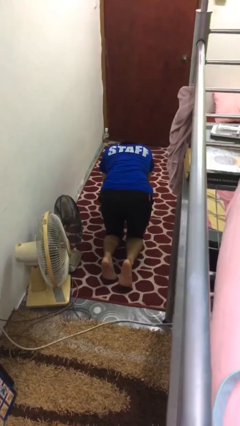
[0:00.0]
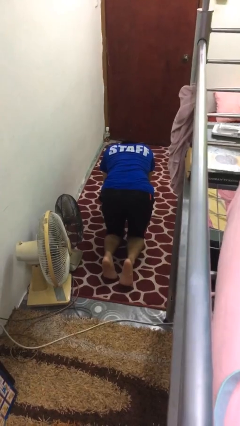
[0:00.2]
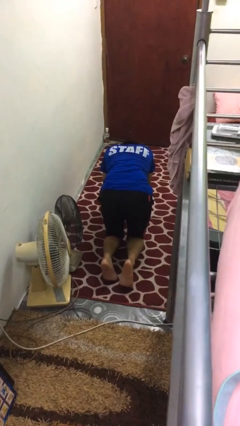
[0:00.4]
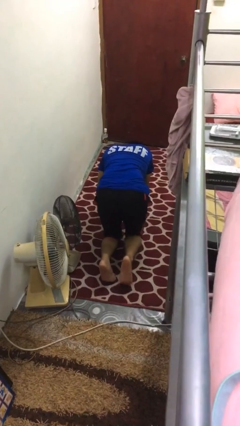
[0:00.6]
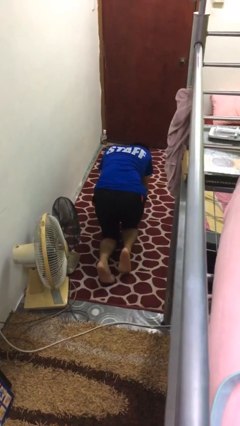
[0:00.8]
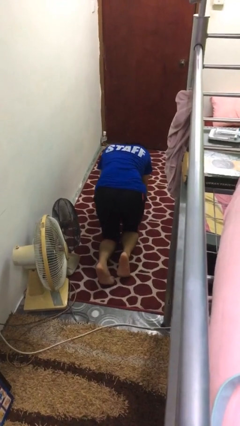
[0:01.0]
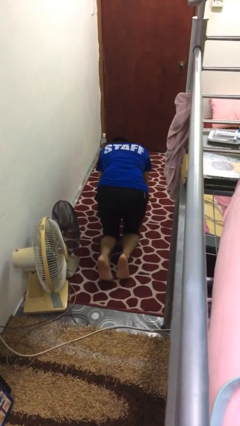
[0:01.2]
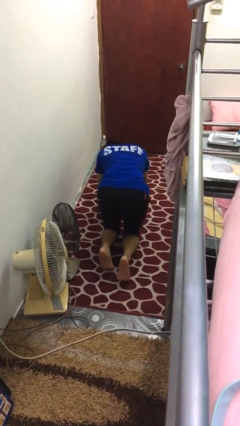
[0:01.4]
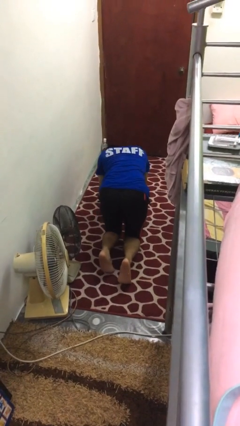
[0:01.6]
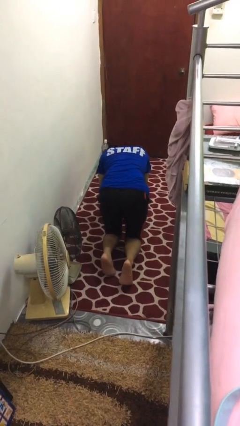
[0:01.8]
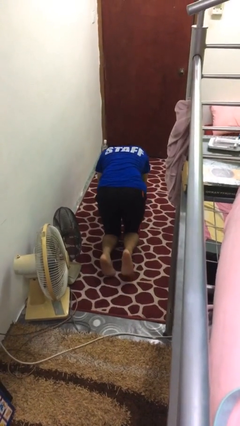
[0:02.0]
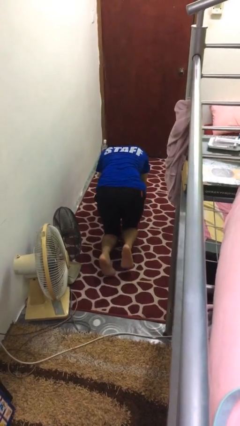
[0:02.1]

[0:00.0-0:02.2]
person crawls

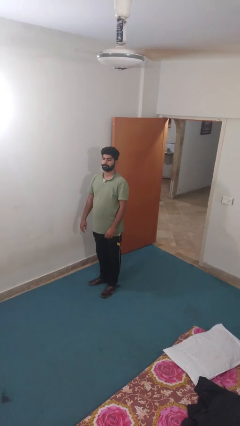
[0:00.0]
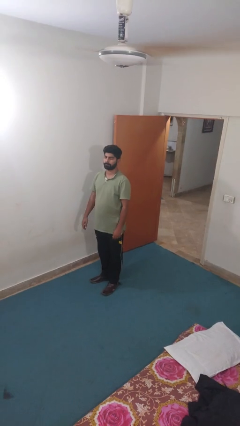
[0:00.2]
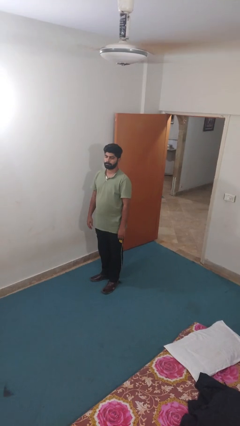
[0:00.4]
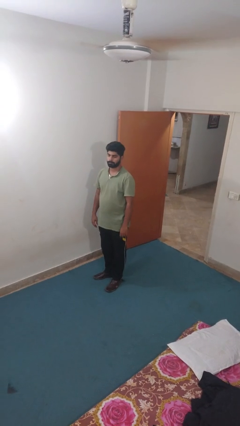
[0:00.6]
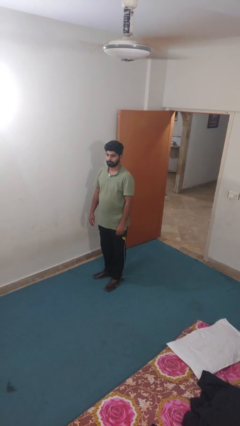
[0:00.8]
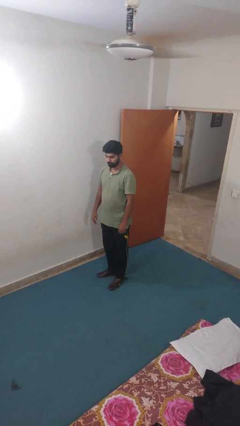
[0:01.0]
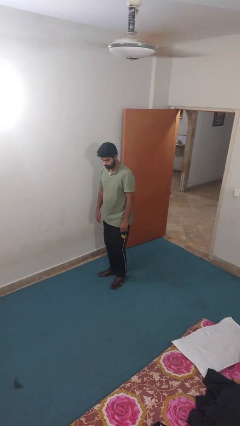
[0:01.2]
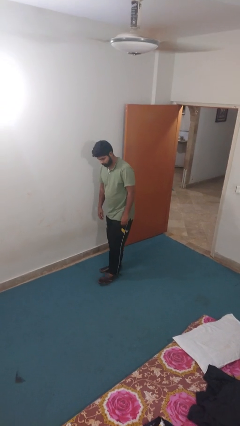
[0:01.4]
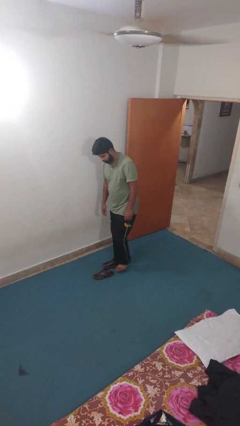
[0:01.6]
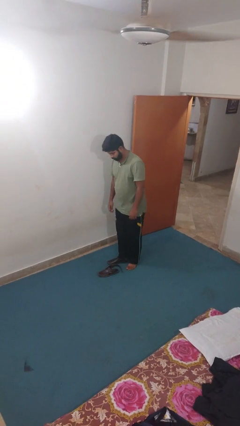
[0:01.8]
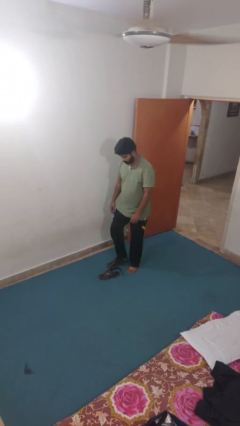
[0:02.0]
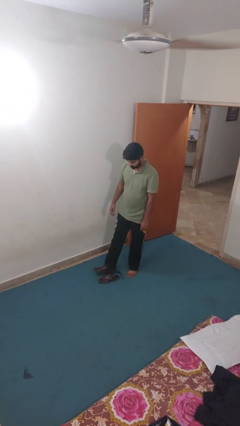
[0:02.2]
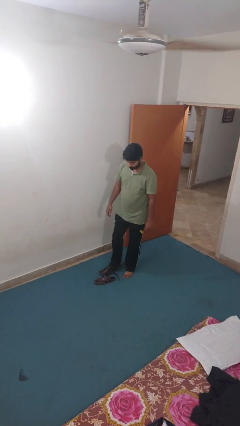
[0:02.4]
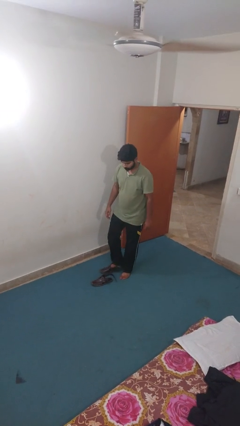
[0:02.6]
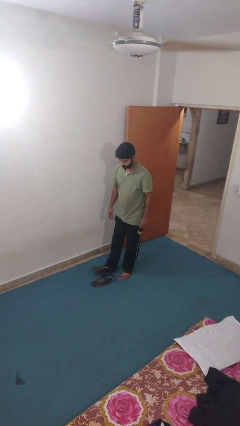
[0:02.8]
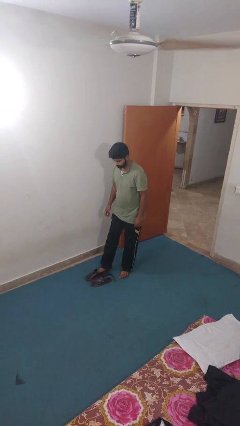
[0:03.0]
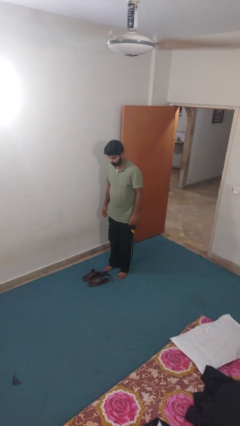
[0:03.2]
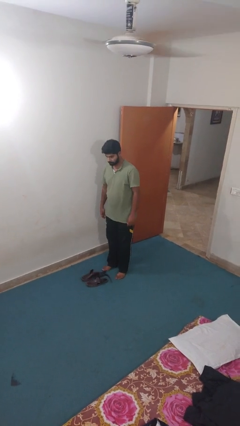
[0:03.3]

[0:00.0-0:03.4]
person takes off shoes

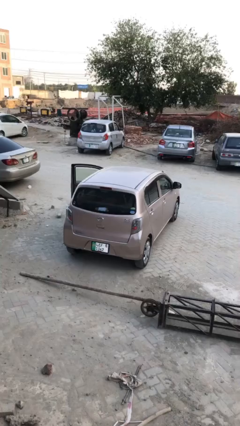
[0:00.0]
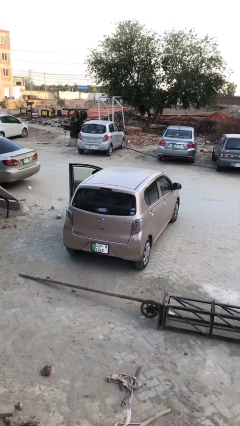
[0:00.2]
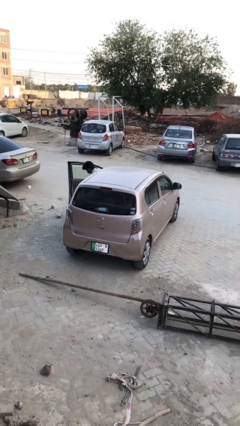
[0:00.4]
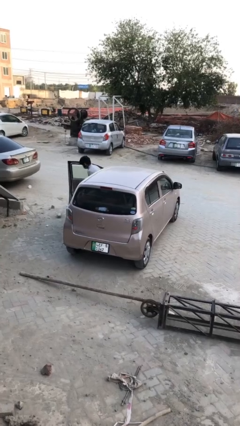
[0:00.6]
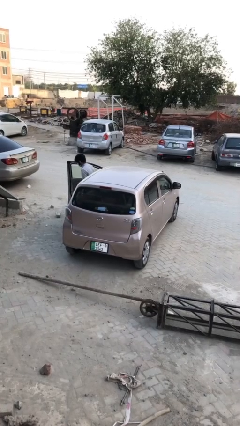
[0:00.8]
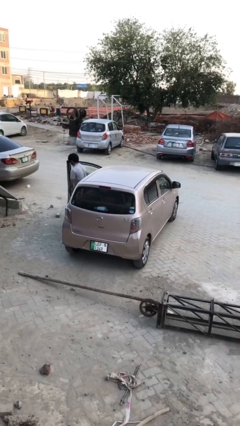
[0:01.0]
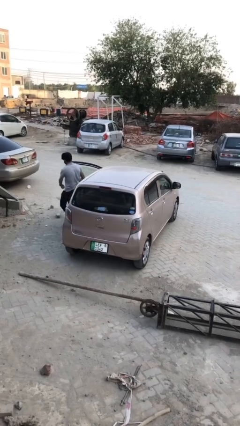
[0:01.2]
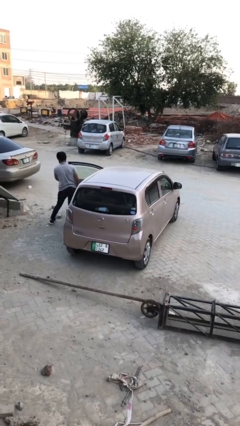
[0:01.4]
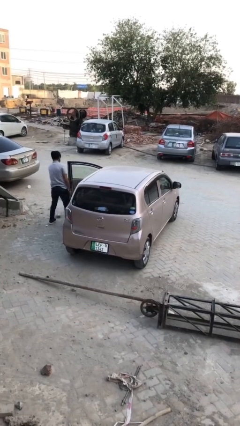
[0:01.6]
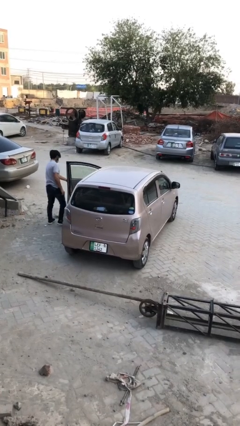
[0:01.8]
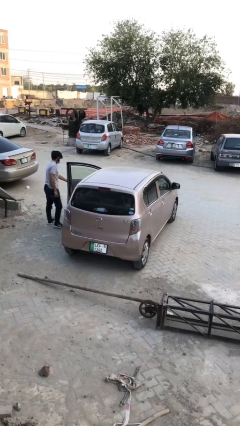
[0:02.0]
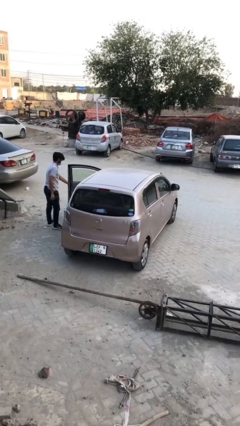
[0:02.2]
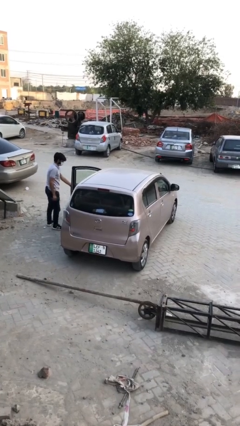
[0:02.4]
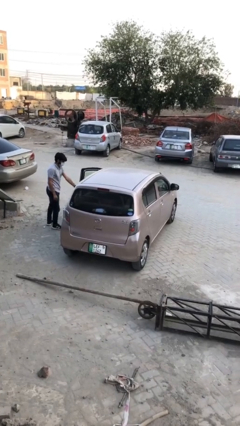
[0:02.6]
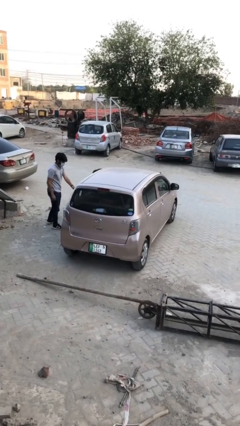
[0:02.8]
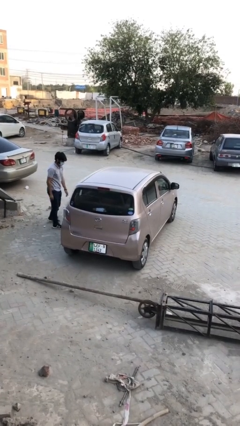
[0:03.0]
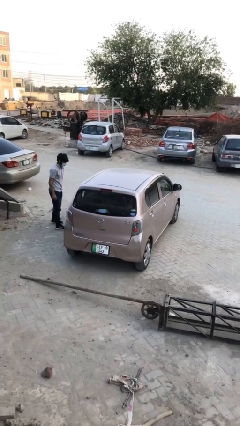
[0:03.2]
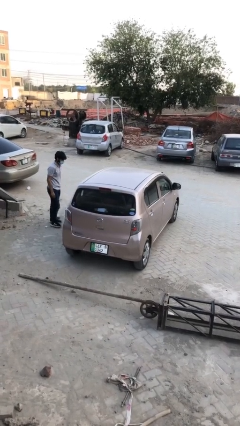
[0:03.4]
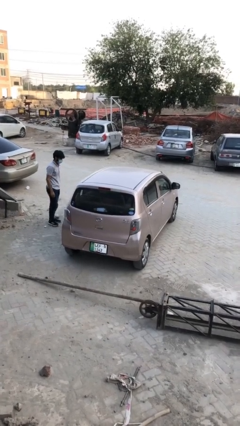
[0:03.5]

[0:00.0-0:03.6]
car drops off person

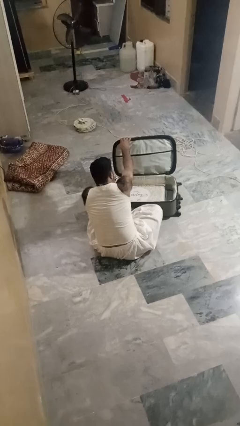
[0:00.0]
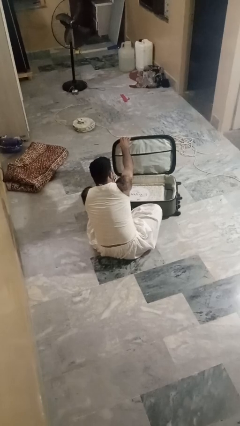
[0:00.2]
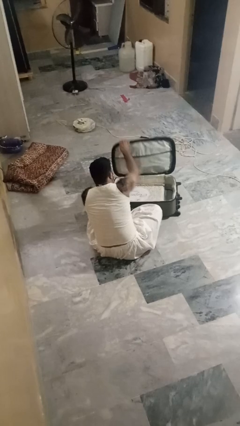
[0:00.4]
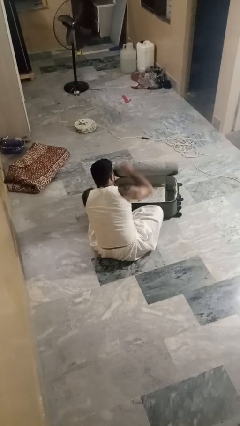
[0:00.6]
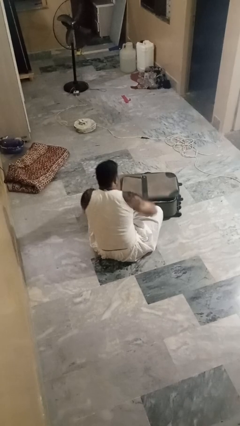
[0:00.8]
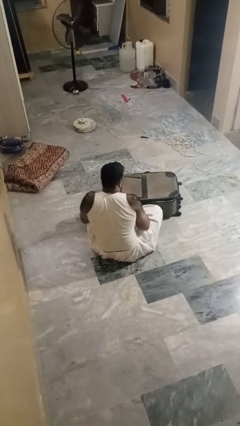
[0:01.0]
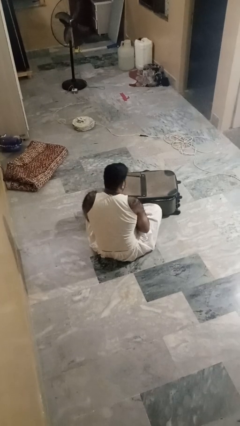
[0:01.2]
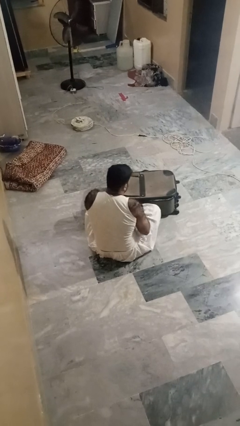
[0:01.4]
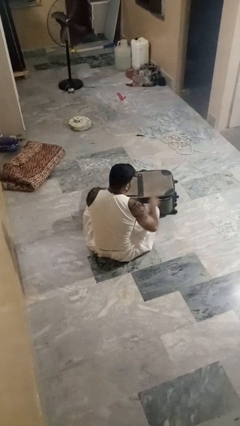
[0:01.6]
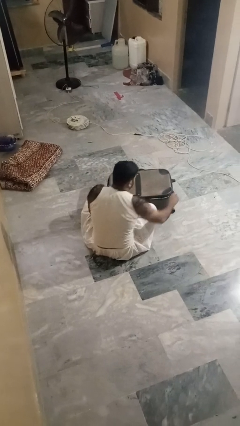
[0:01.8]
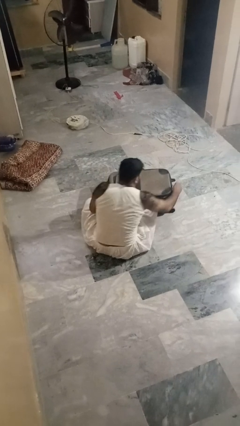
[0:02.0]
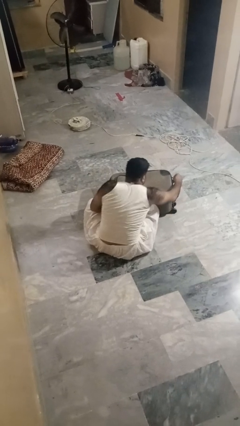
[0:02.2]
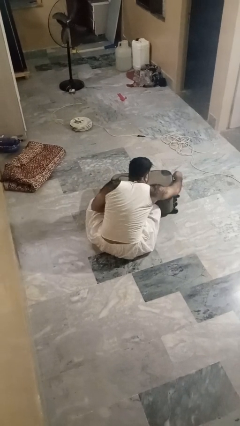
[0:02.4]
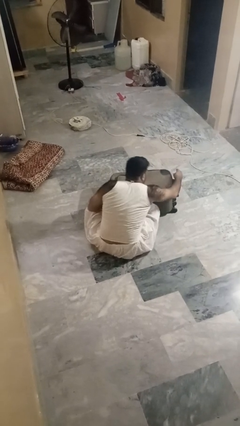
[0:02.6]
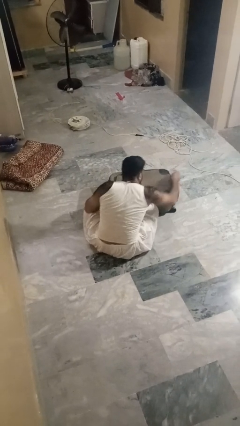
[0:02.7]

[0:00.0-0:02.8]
person closes suitcase

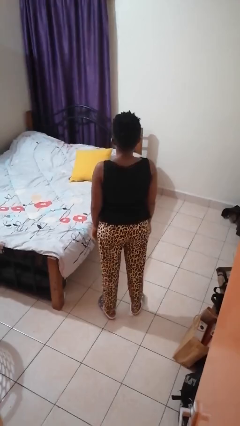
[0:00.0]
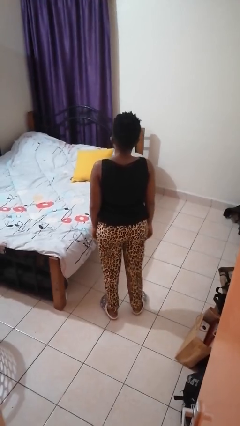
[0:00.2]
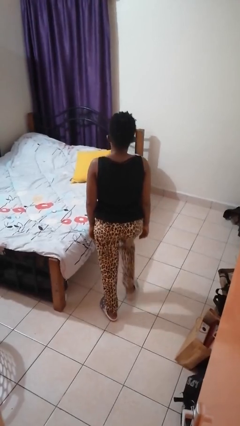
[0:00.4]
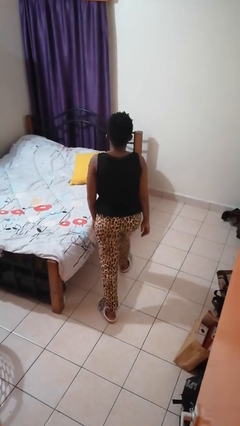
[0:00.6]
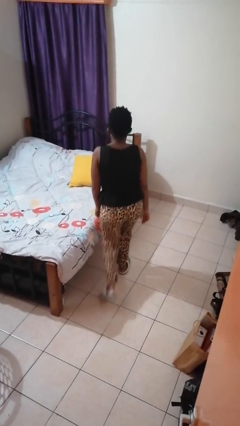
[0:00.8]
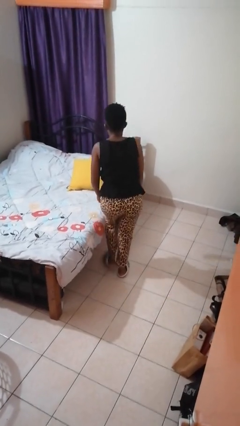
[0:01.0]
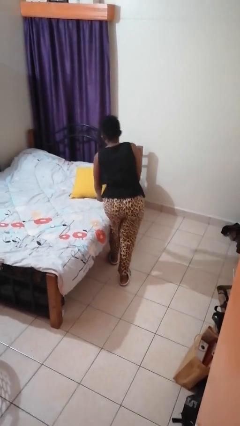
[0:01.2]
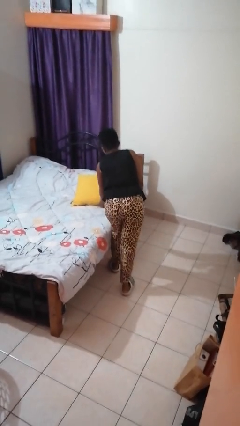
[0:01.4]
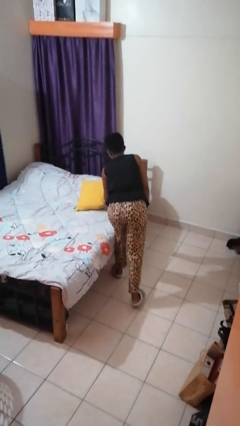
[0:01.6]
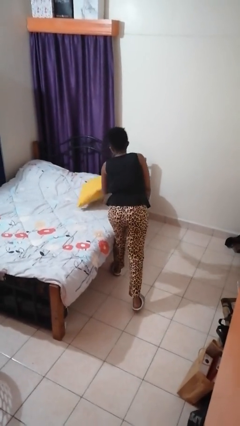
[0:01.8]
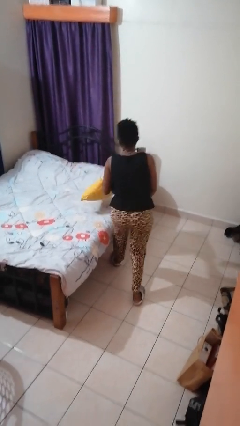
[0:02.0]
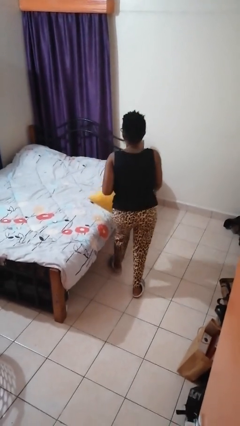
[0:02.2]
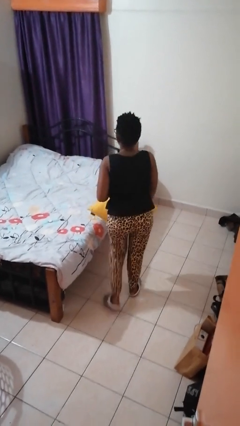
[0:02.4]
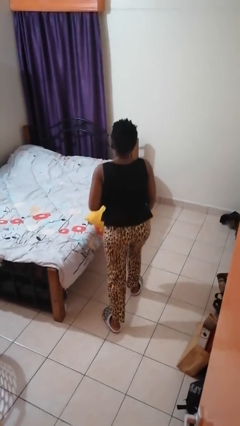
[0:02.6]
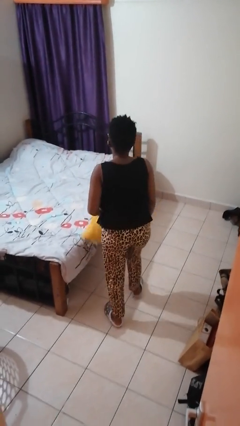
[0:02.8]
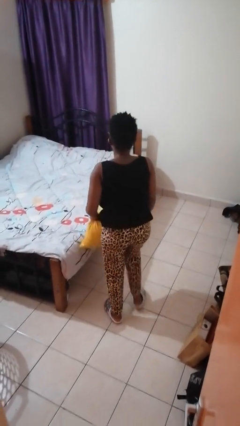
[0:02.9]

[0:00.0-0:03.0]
person picks up object from bed

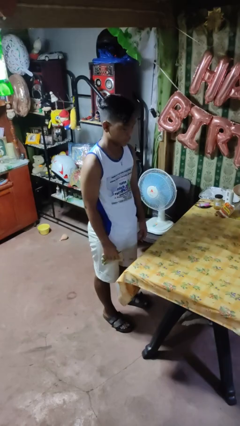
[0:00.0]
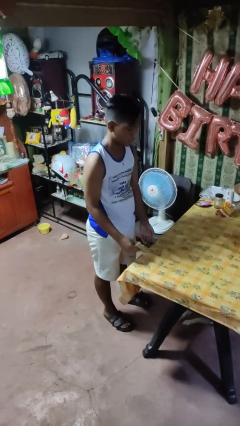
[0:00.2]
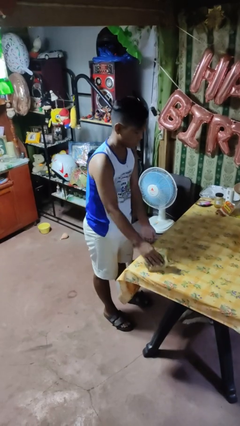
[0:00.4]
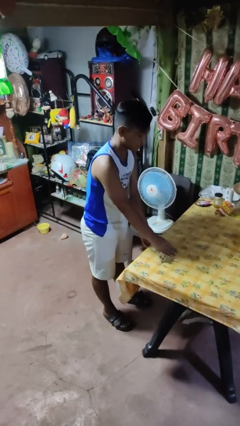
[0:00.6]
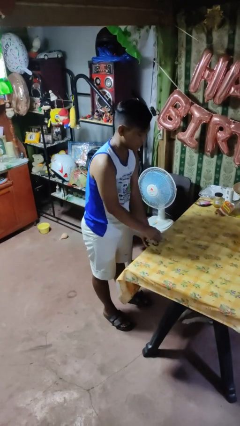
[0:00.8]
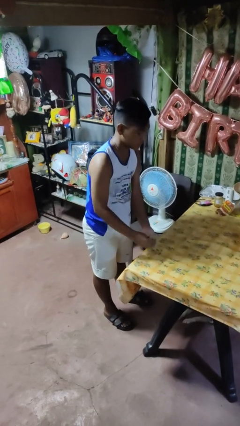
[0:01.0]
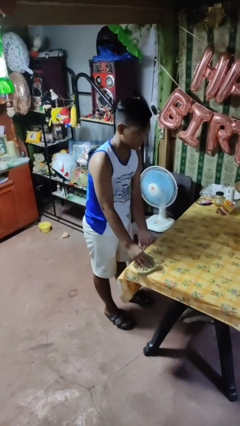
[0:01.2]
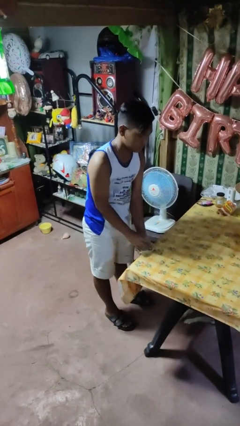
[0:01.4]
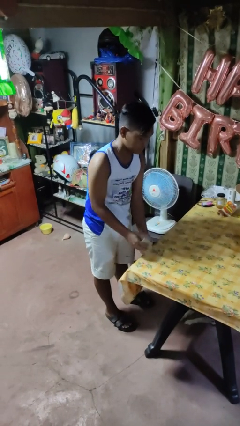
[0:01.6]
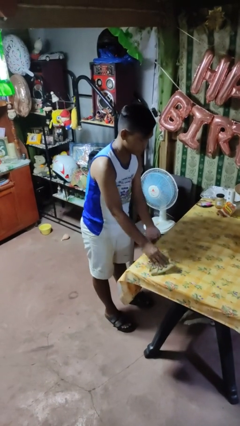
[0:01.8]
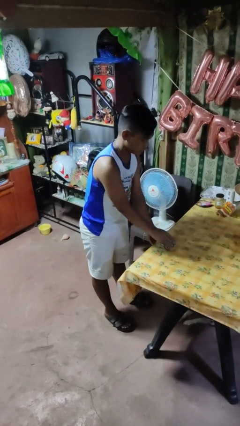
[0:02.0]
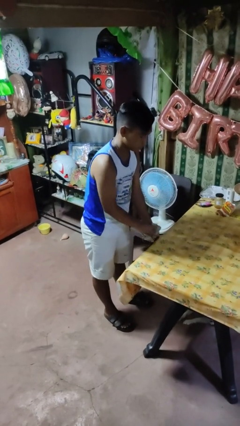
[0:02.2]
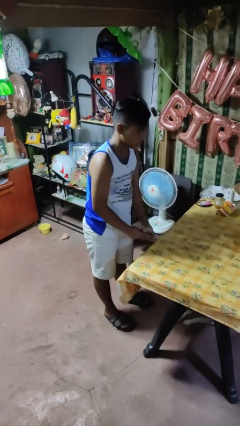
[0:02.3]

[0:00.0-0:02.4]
person cleans table with rag

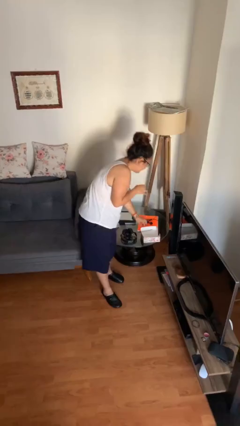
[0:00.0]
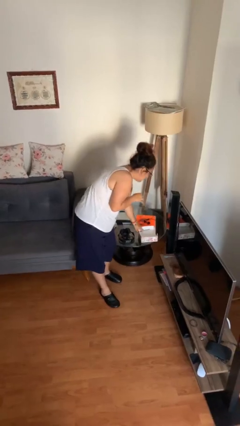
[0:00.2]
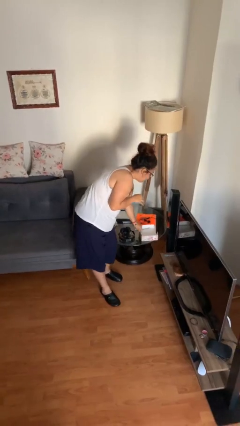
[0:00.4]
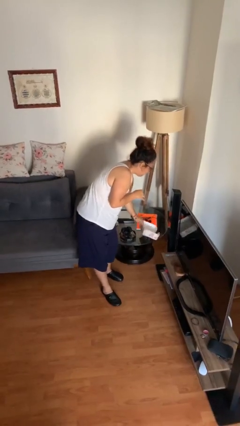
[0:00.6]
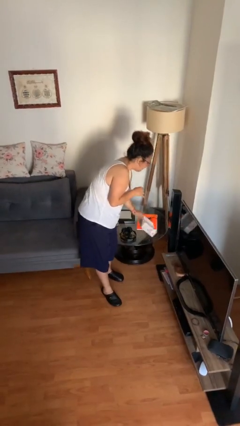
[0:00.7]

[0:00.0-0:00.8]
person picks up object from table
